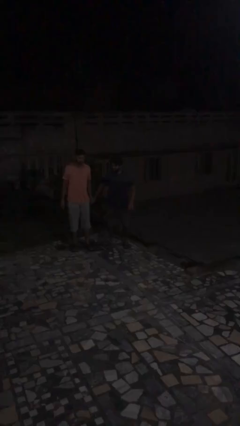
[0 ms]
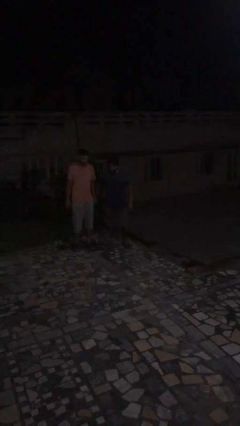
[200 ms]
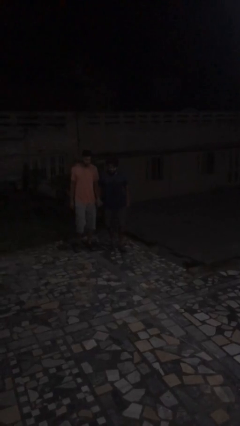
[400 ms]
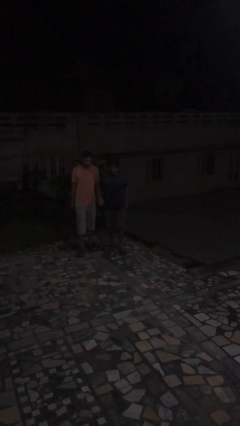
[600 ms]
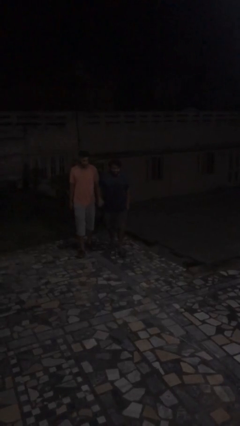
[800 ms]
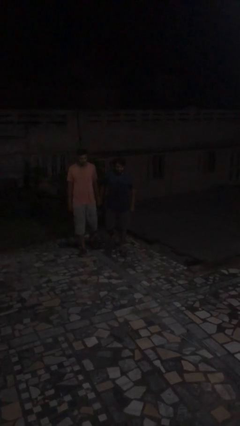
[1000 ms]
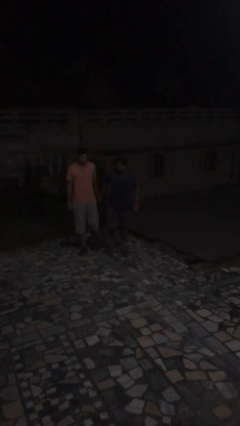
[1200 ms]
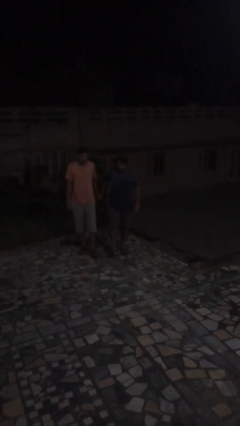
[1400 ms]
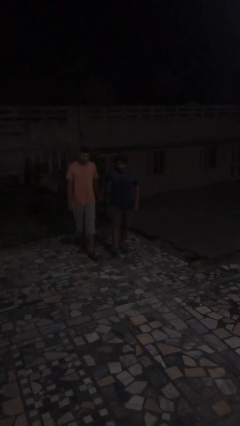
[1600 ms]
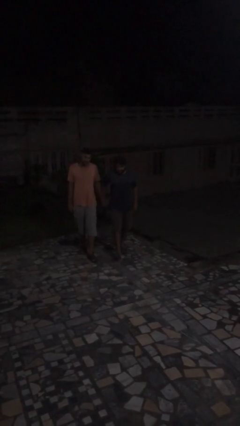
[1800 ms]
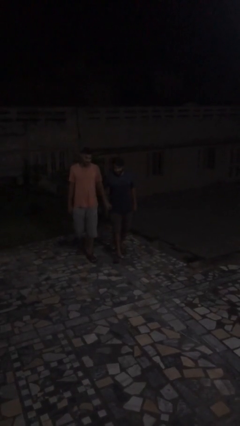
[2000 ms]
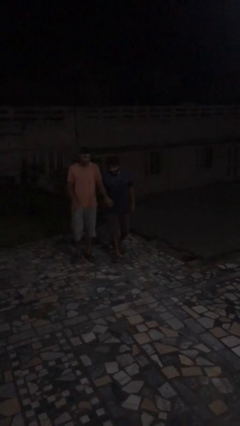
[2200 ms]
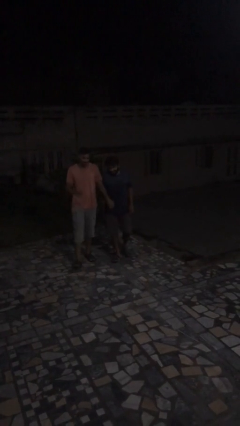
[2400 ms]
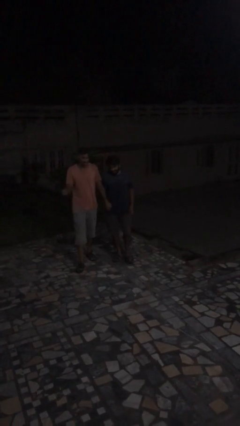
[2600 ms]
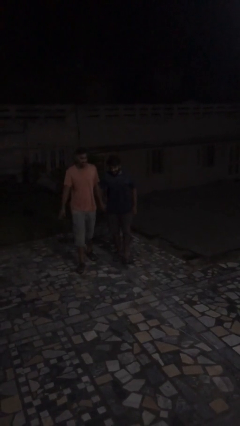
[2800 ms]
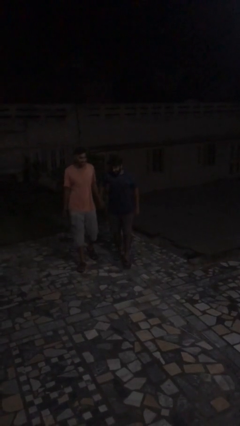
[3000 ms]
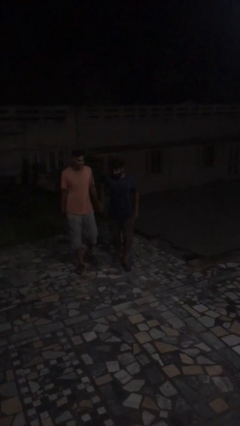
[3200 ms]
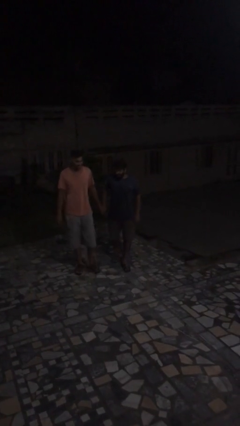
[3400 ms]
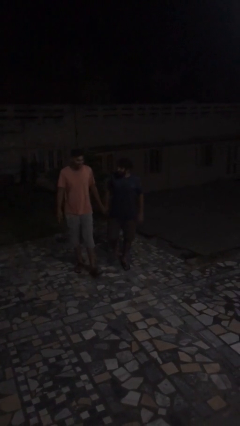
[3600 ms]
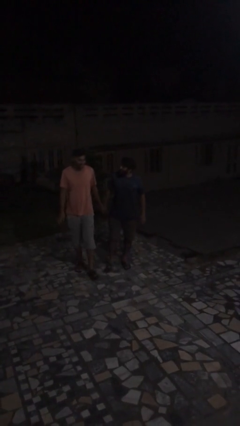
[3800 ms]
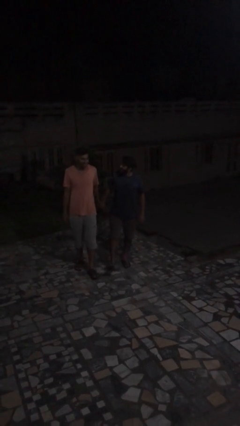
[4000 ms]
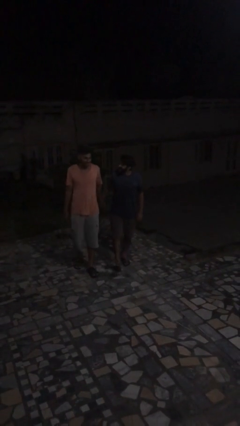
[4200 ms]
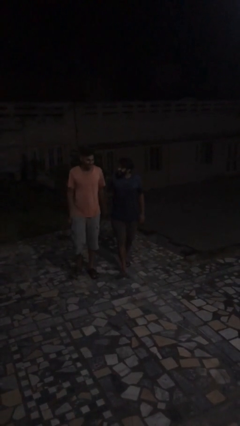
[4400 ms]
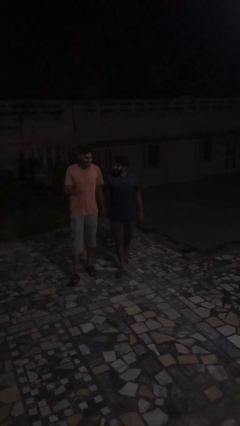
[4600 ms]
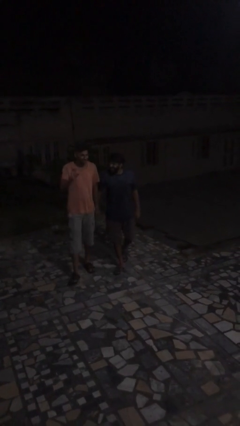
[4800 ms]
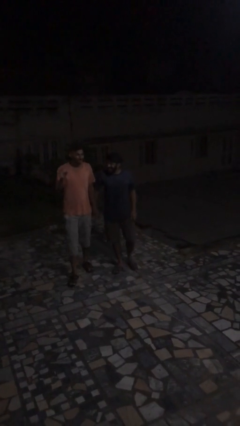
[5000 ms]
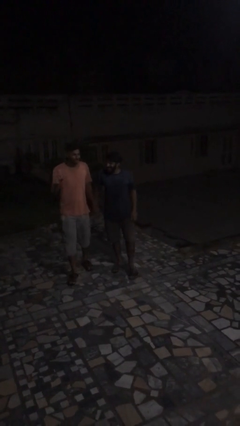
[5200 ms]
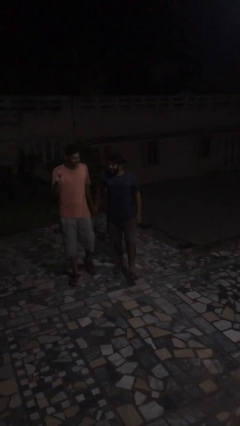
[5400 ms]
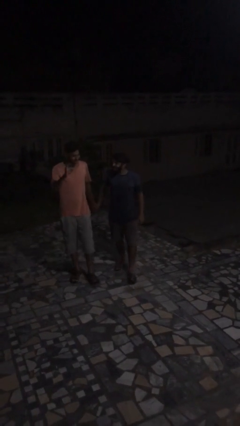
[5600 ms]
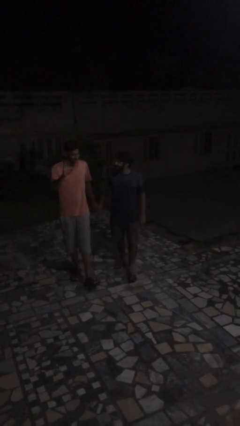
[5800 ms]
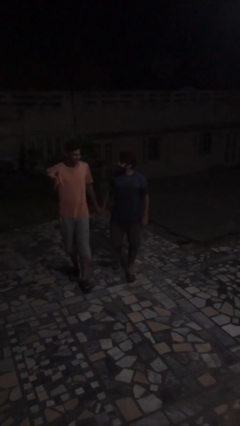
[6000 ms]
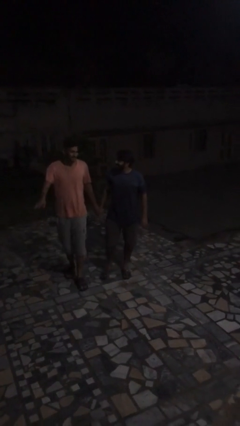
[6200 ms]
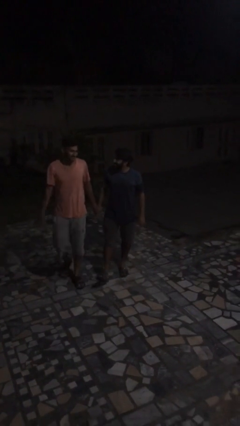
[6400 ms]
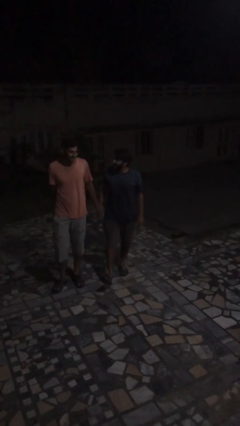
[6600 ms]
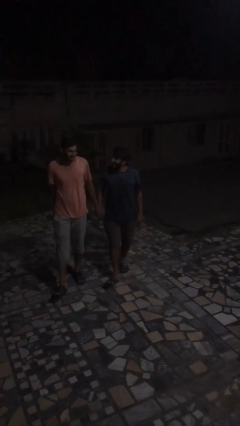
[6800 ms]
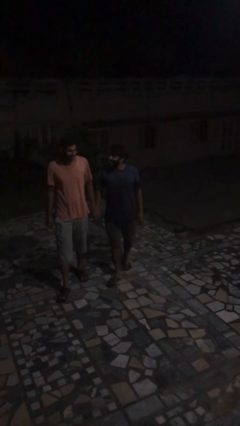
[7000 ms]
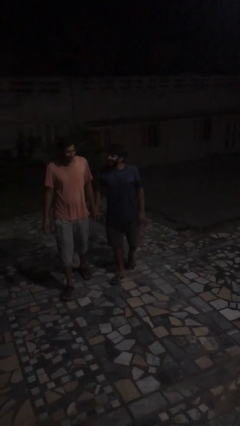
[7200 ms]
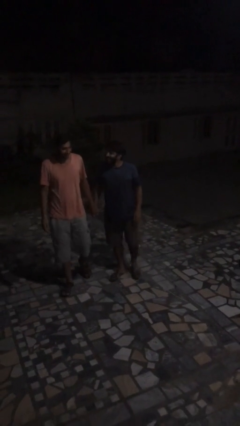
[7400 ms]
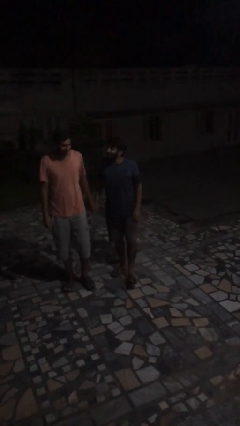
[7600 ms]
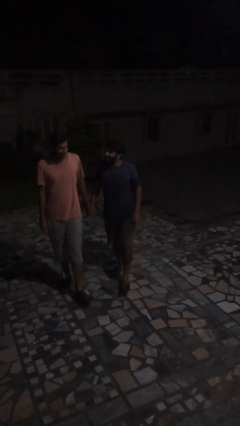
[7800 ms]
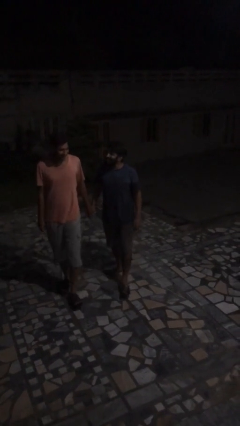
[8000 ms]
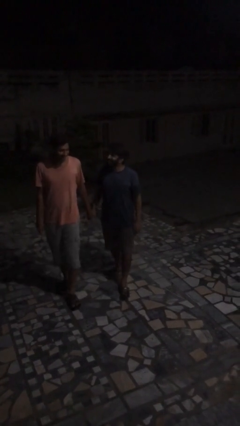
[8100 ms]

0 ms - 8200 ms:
person holds hand

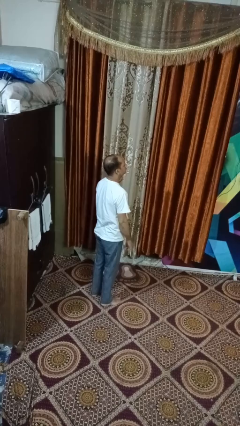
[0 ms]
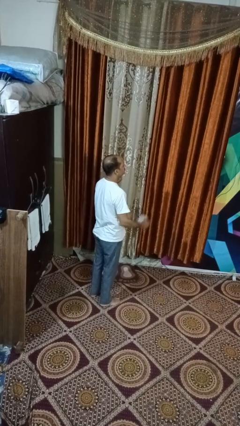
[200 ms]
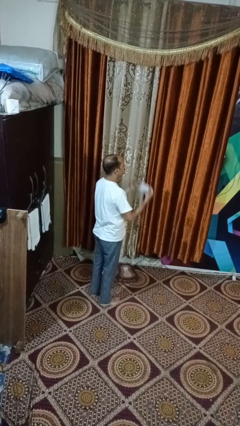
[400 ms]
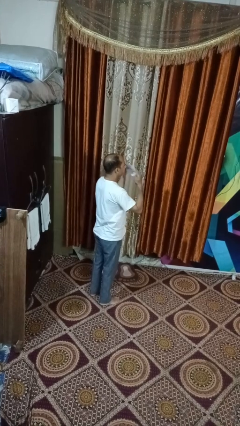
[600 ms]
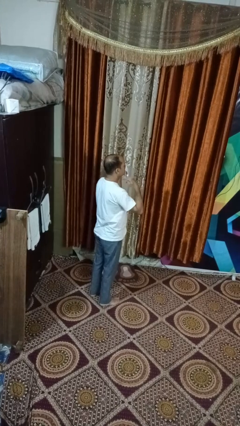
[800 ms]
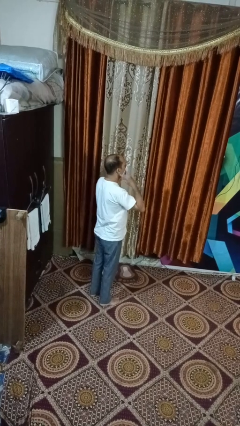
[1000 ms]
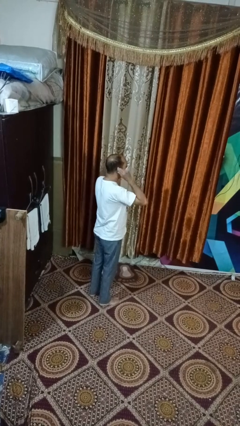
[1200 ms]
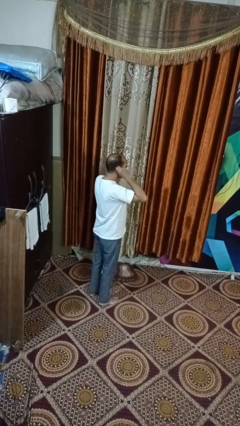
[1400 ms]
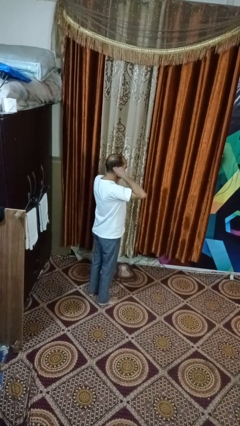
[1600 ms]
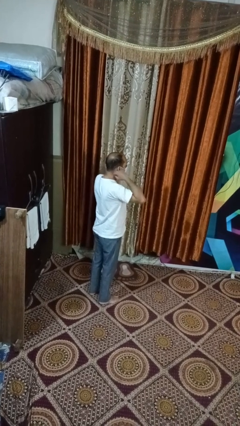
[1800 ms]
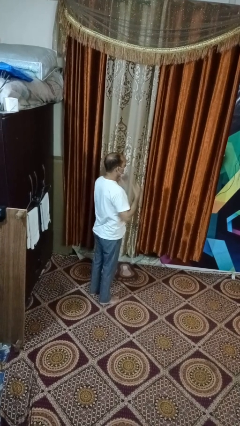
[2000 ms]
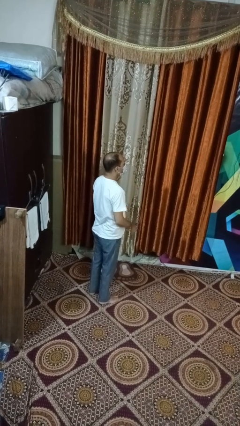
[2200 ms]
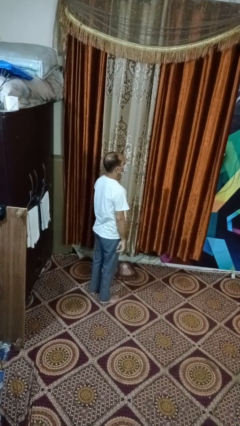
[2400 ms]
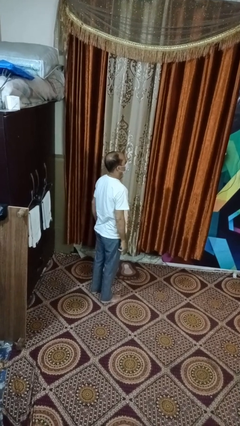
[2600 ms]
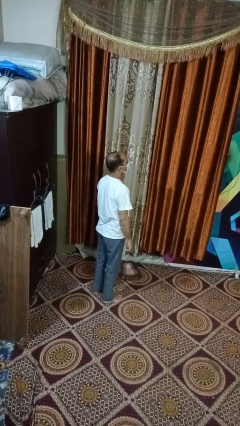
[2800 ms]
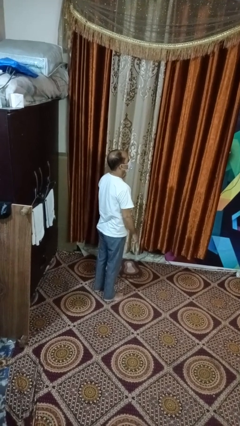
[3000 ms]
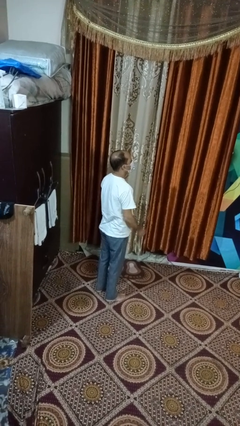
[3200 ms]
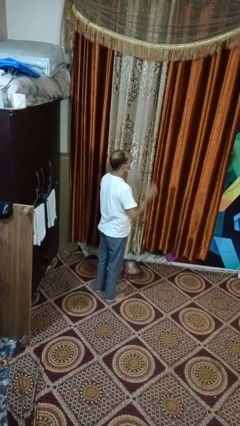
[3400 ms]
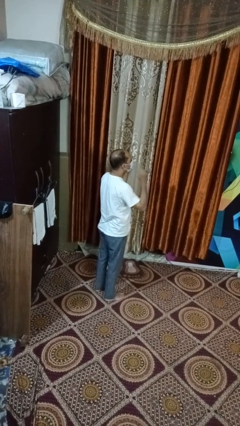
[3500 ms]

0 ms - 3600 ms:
person puts on facemask

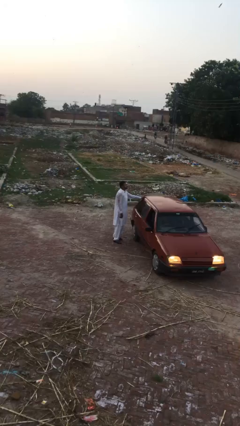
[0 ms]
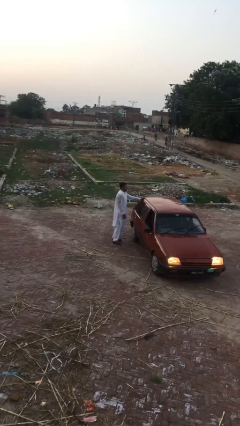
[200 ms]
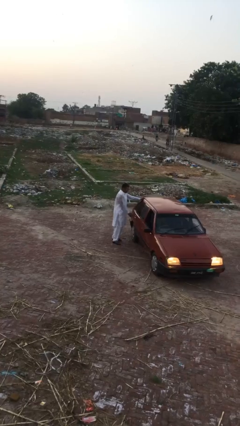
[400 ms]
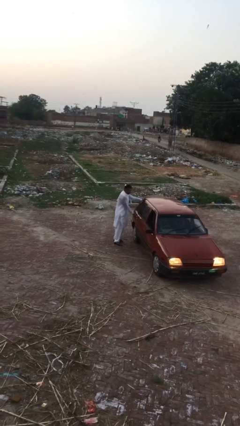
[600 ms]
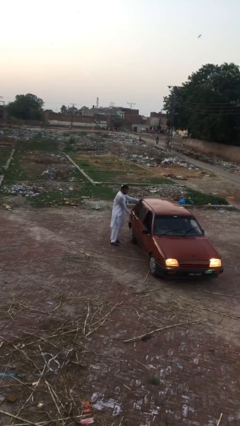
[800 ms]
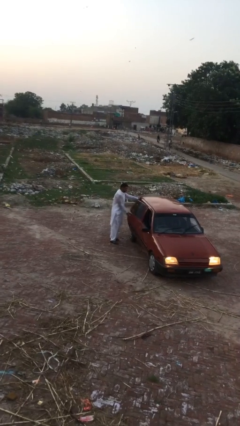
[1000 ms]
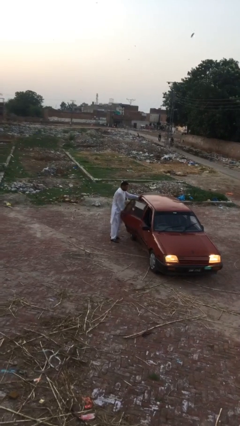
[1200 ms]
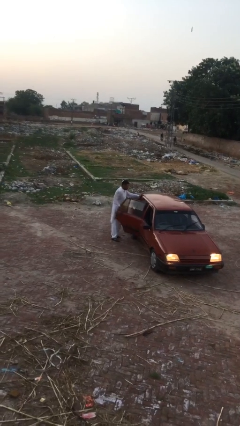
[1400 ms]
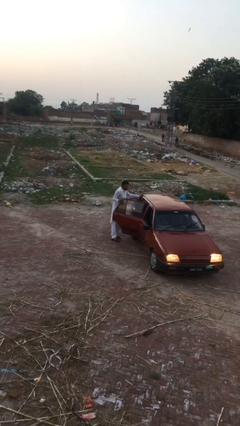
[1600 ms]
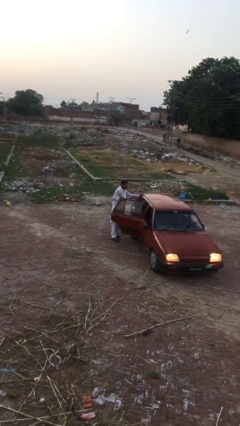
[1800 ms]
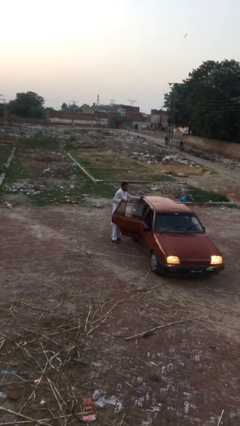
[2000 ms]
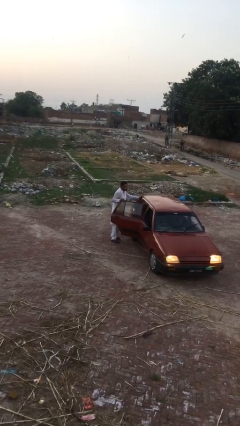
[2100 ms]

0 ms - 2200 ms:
person opens car door

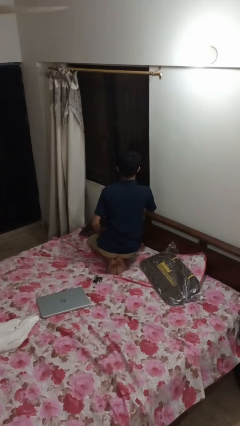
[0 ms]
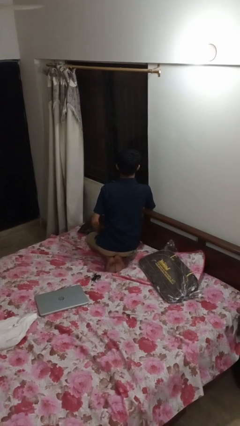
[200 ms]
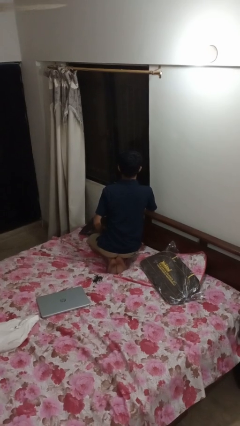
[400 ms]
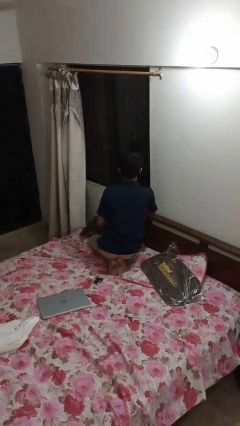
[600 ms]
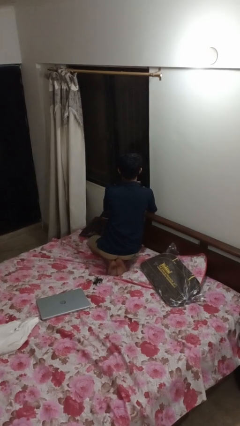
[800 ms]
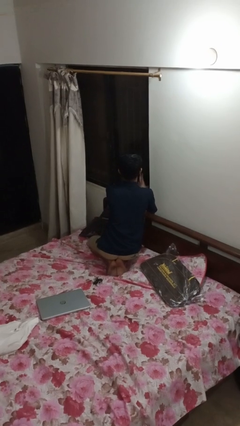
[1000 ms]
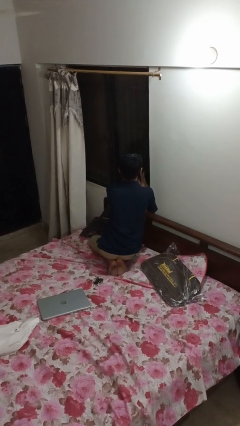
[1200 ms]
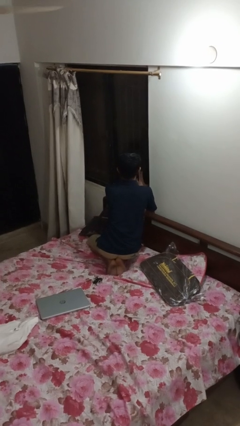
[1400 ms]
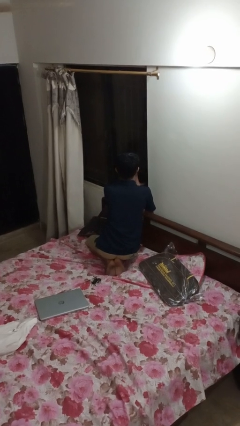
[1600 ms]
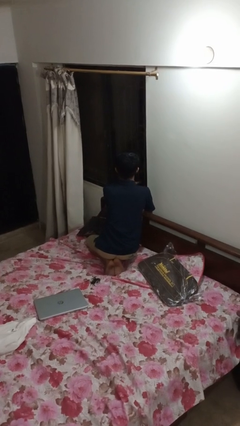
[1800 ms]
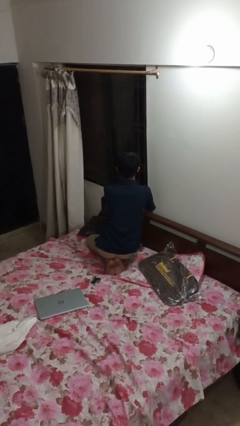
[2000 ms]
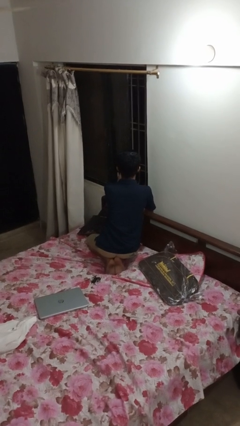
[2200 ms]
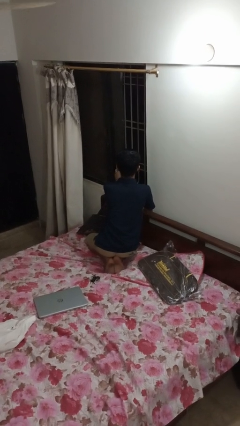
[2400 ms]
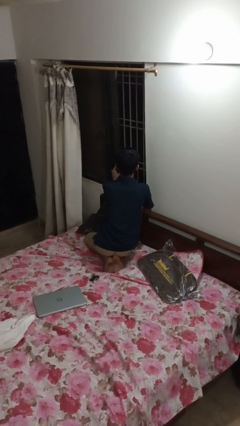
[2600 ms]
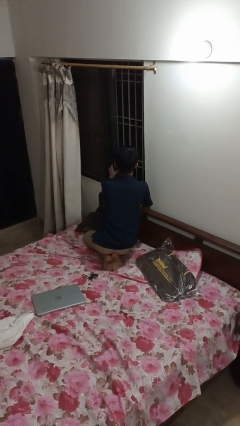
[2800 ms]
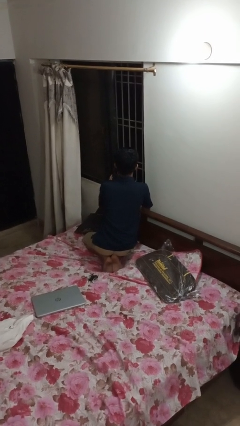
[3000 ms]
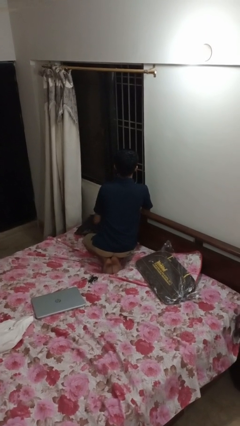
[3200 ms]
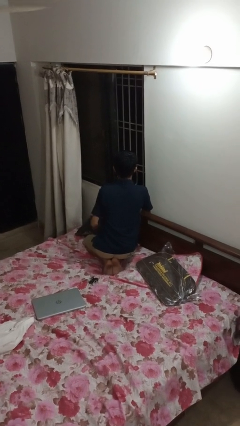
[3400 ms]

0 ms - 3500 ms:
person opens home window

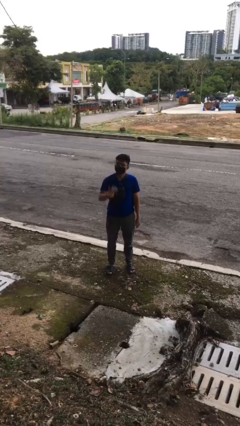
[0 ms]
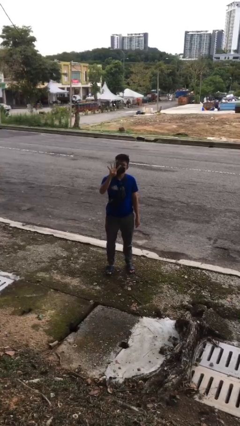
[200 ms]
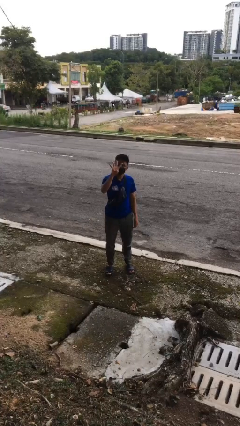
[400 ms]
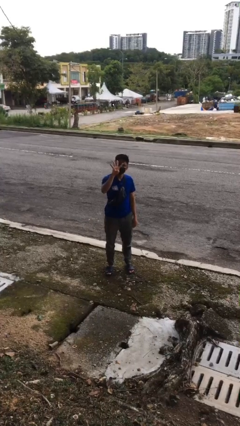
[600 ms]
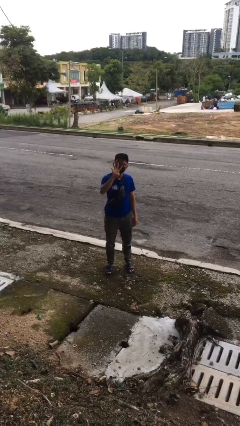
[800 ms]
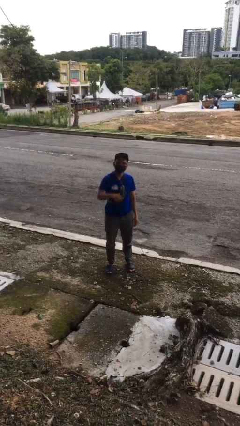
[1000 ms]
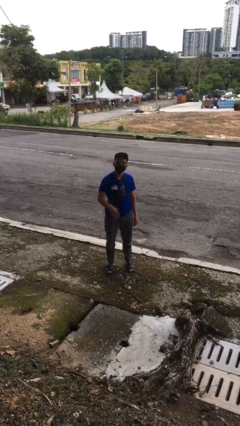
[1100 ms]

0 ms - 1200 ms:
person gestures number four
